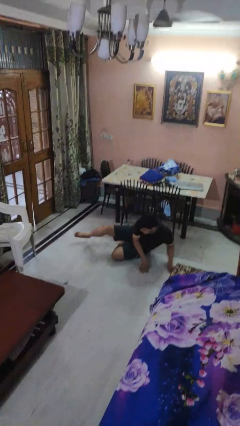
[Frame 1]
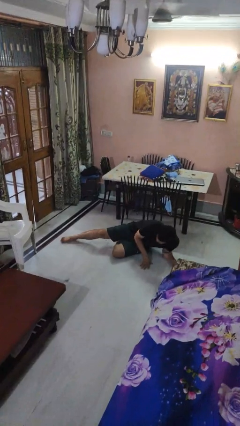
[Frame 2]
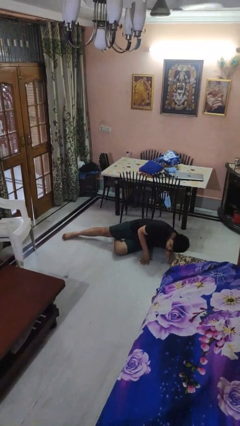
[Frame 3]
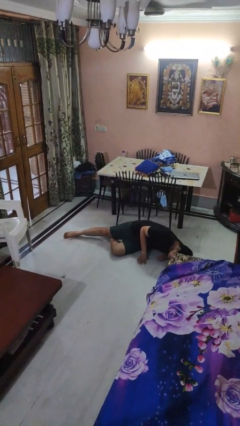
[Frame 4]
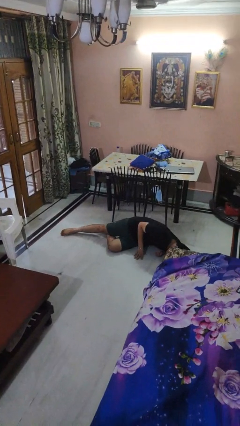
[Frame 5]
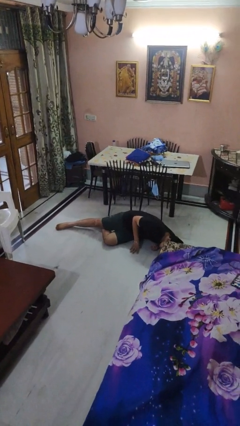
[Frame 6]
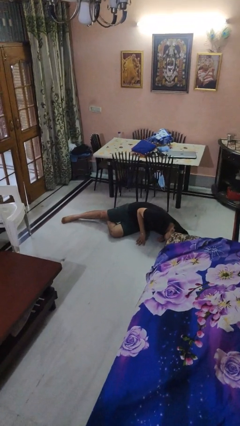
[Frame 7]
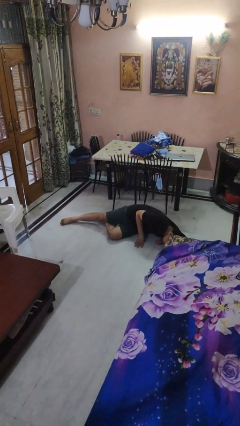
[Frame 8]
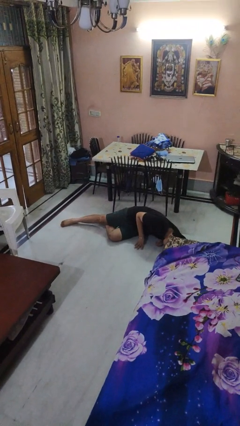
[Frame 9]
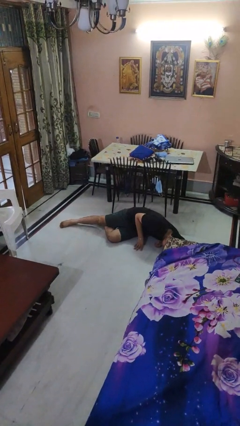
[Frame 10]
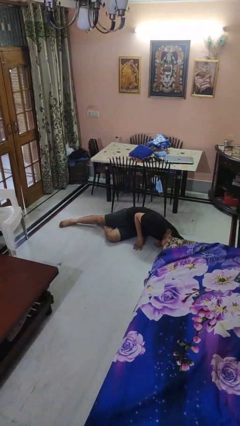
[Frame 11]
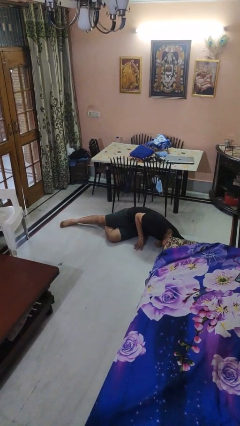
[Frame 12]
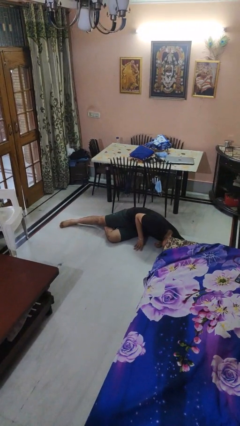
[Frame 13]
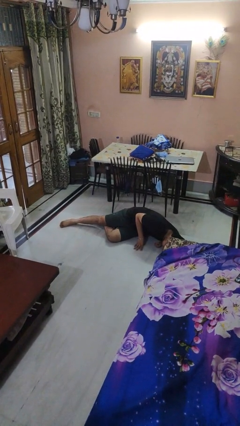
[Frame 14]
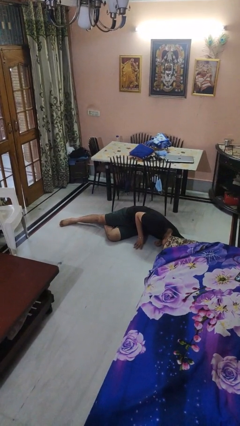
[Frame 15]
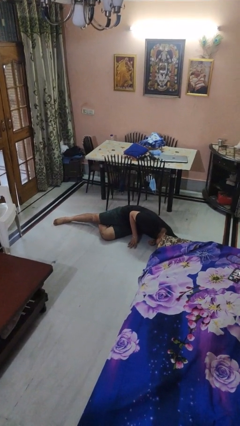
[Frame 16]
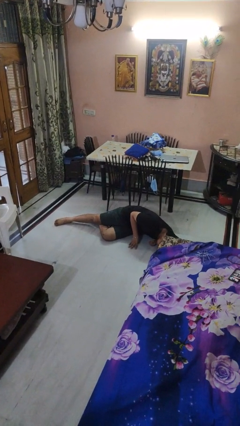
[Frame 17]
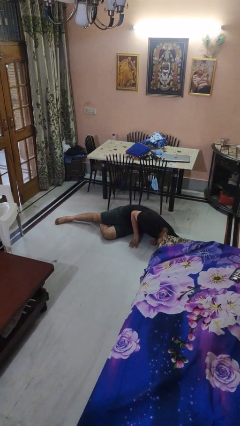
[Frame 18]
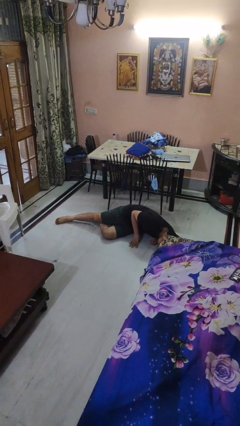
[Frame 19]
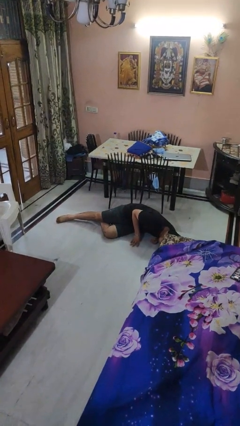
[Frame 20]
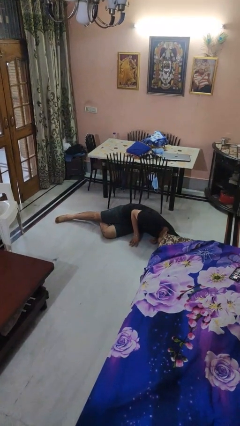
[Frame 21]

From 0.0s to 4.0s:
person lies down on floor

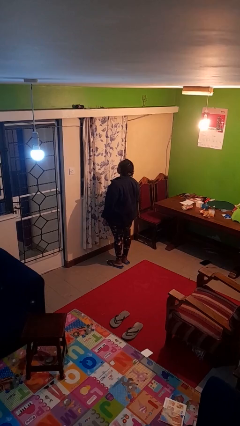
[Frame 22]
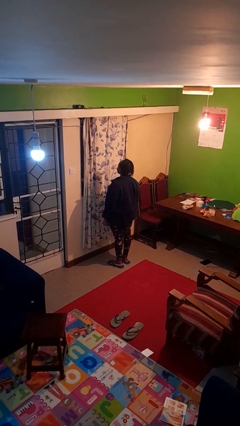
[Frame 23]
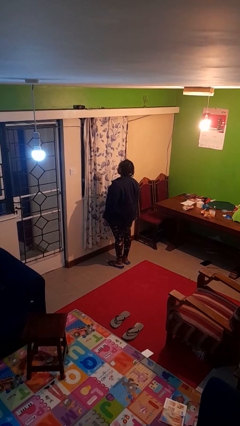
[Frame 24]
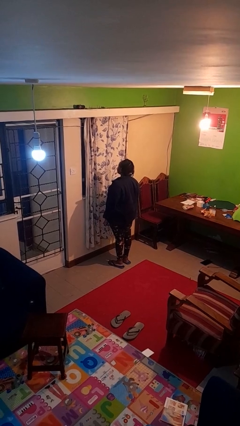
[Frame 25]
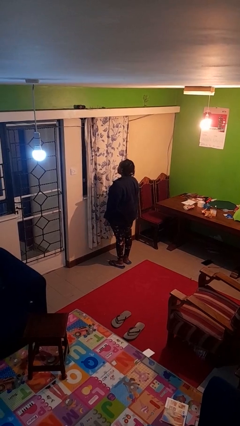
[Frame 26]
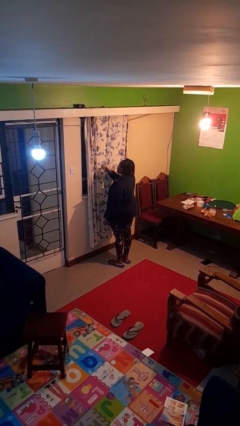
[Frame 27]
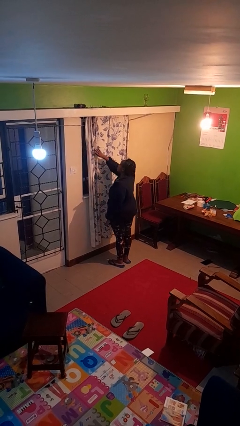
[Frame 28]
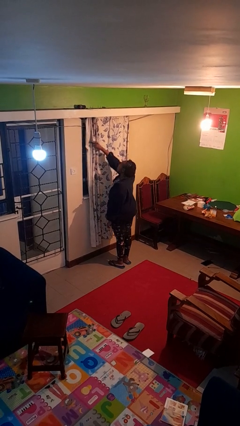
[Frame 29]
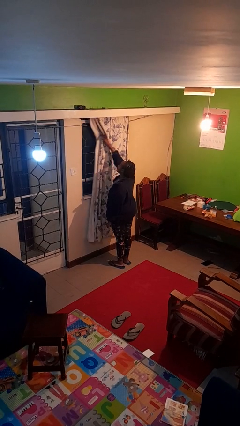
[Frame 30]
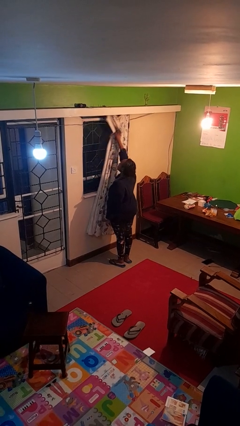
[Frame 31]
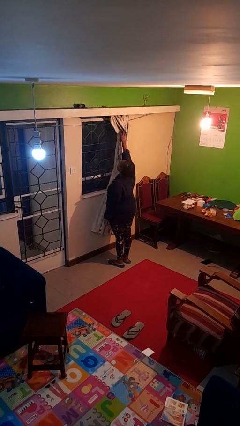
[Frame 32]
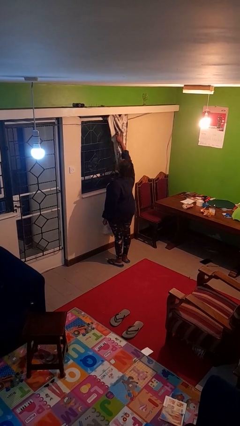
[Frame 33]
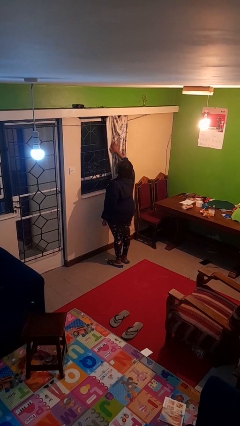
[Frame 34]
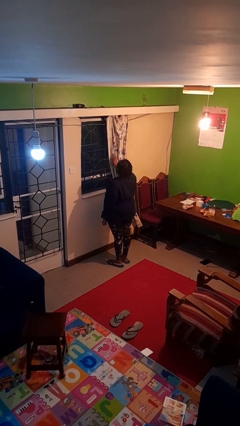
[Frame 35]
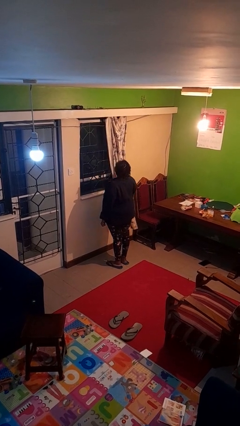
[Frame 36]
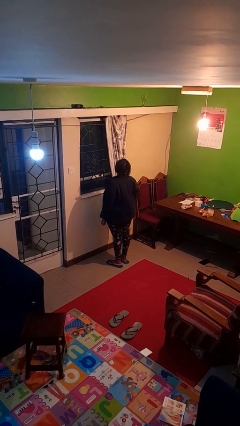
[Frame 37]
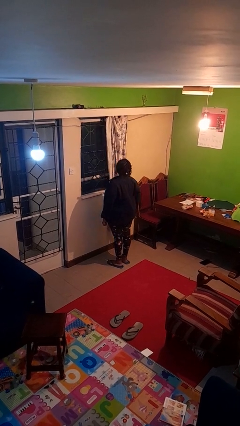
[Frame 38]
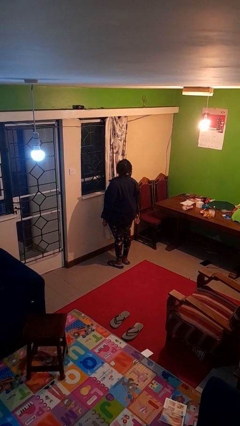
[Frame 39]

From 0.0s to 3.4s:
person opens curtains

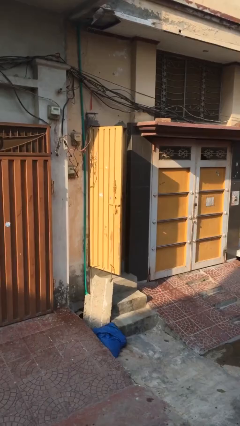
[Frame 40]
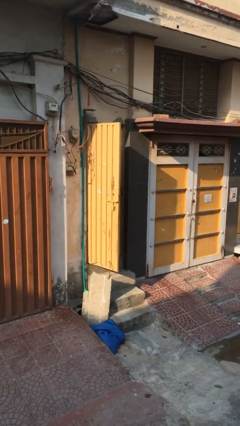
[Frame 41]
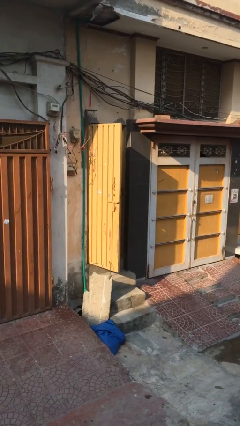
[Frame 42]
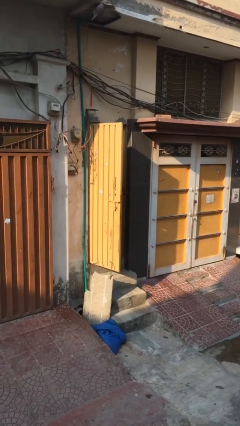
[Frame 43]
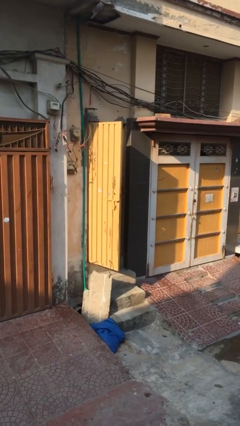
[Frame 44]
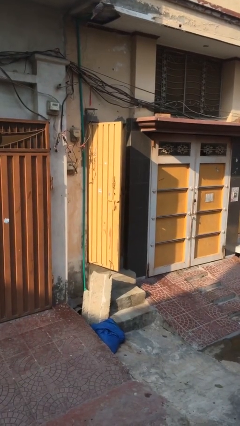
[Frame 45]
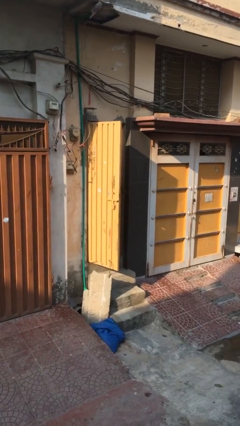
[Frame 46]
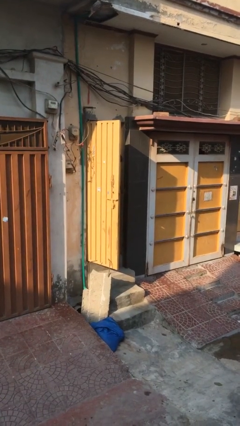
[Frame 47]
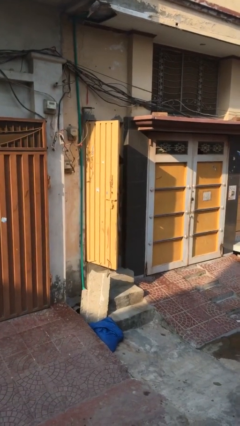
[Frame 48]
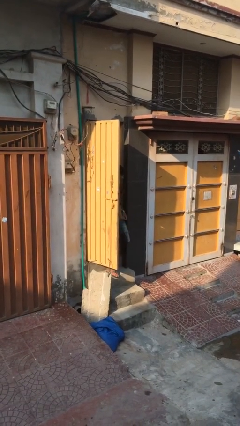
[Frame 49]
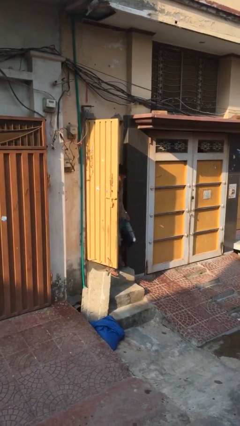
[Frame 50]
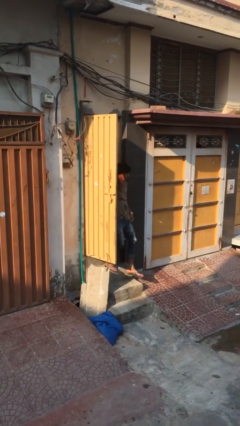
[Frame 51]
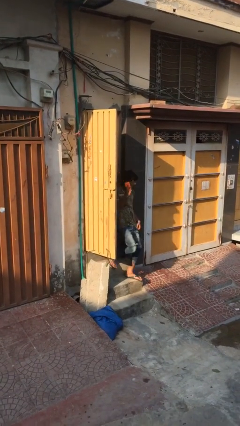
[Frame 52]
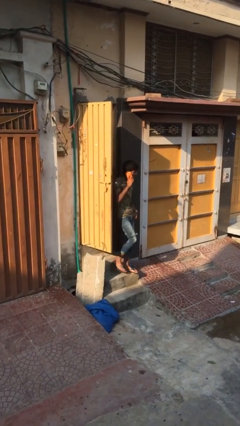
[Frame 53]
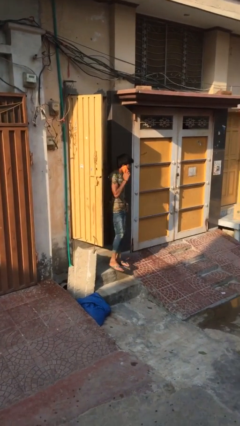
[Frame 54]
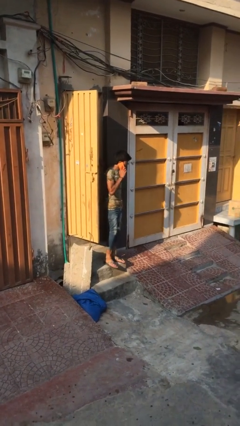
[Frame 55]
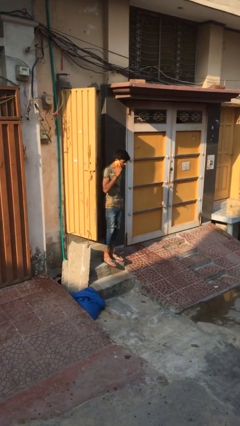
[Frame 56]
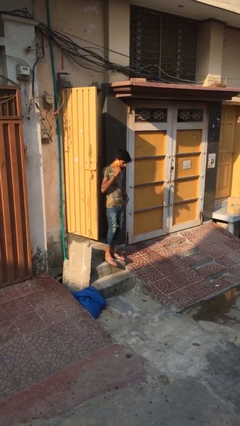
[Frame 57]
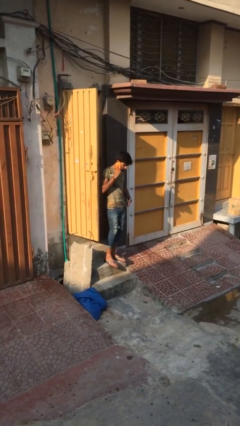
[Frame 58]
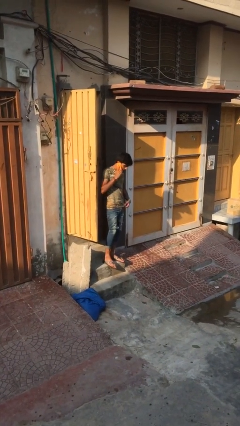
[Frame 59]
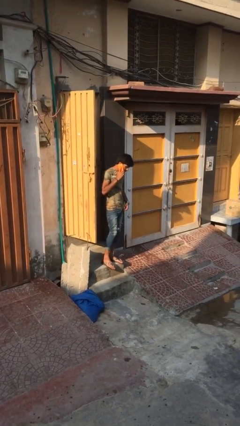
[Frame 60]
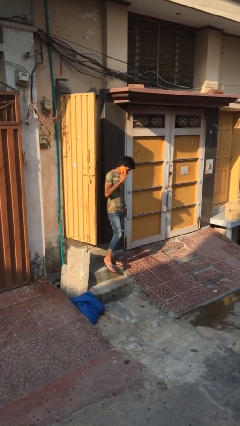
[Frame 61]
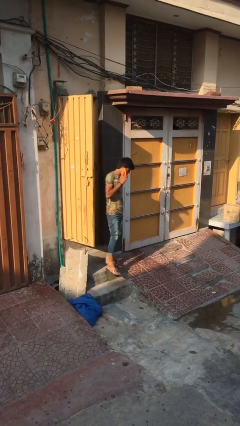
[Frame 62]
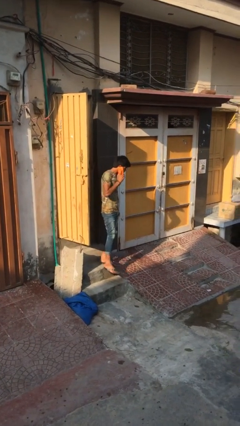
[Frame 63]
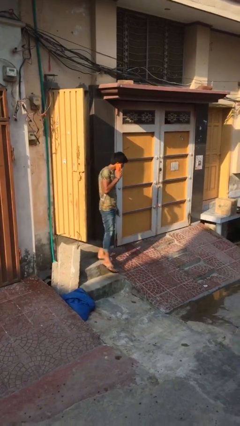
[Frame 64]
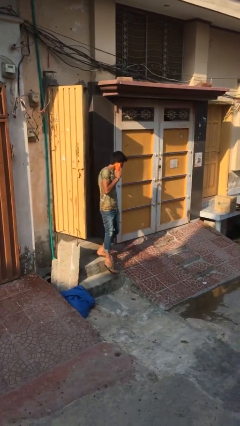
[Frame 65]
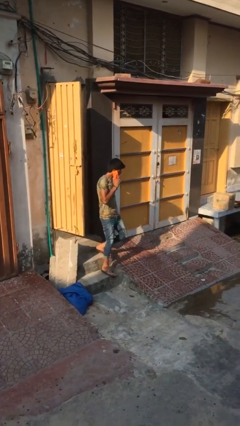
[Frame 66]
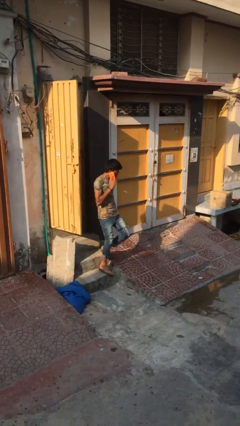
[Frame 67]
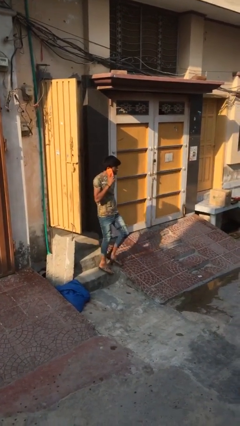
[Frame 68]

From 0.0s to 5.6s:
person enters scene through structure

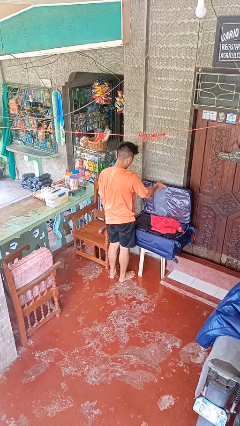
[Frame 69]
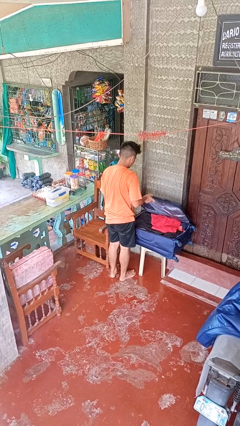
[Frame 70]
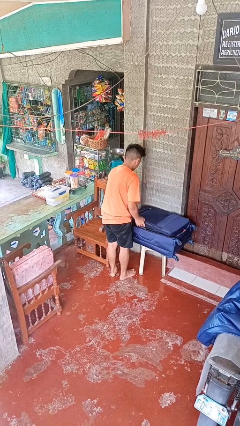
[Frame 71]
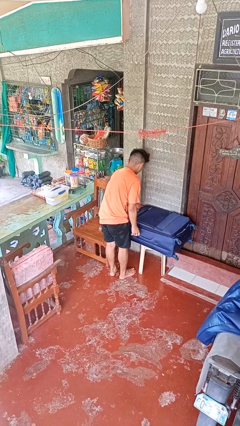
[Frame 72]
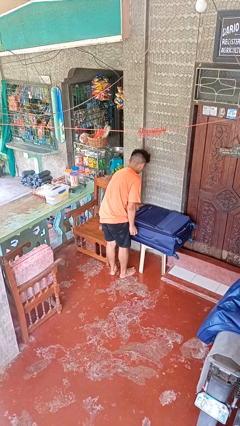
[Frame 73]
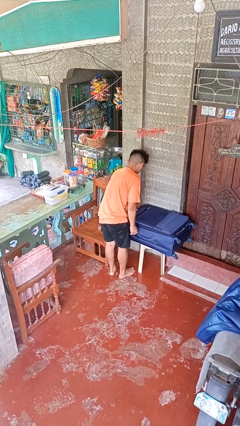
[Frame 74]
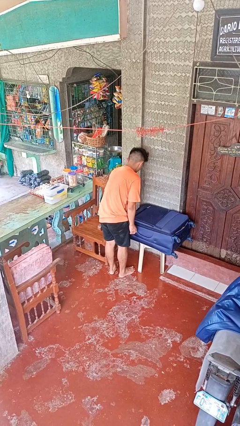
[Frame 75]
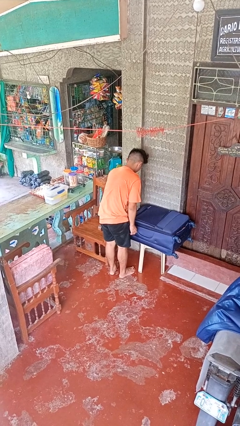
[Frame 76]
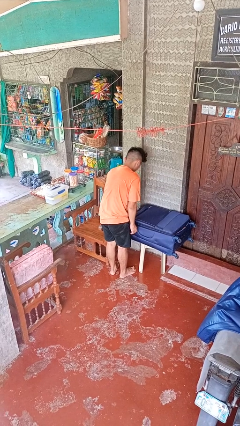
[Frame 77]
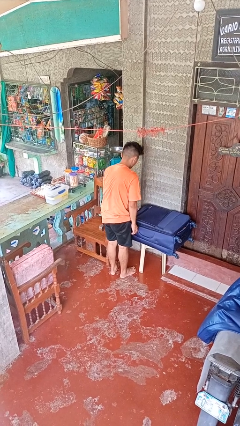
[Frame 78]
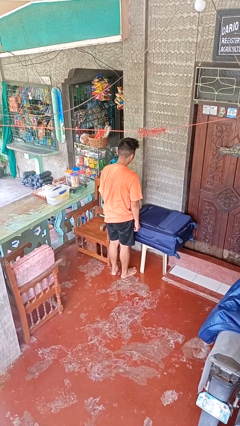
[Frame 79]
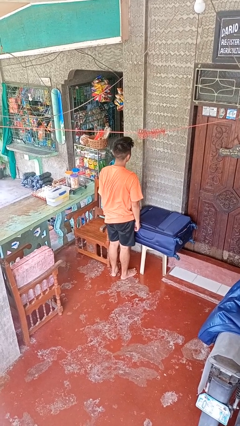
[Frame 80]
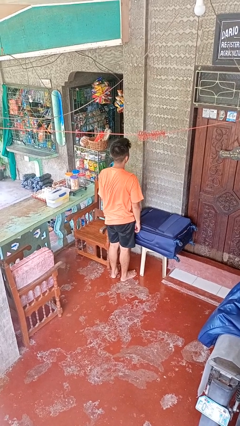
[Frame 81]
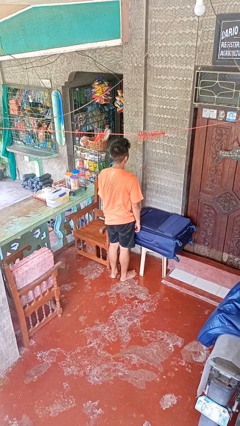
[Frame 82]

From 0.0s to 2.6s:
person closes suitcase

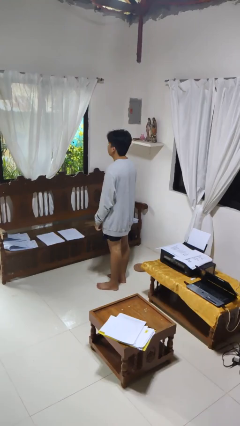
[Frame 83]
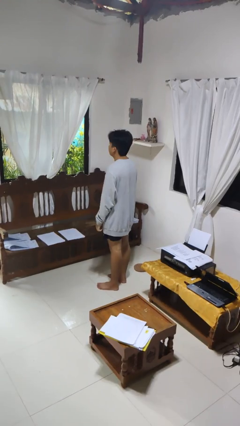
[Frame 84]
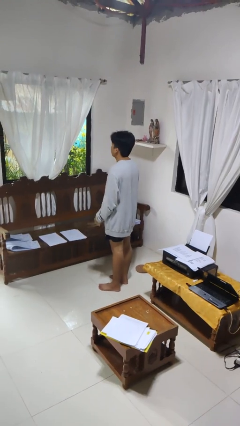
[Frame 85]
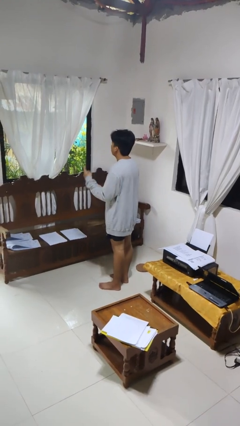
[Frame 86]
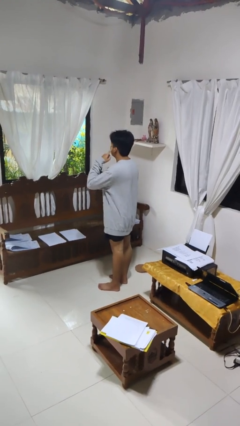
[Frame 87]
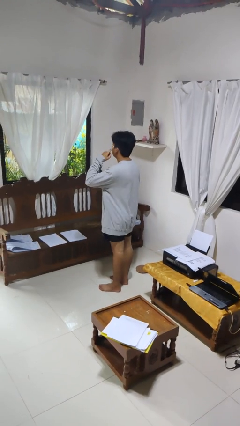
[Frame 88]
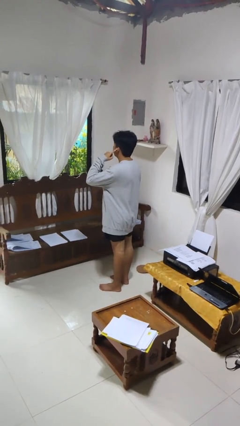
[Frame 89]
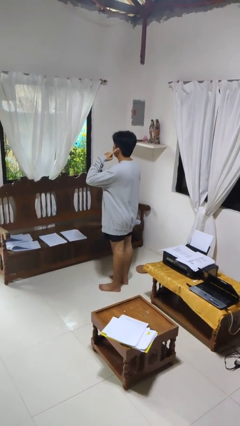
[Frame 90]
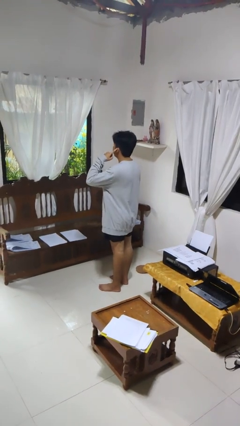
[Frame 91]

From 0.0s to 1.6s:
person gestures listen closely

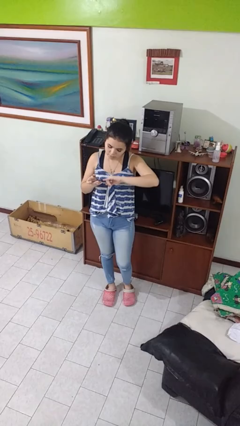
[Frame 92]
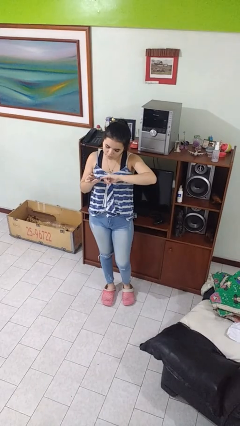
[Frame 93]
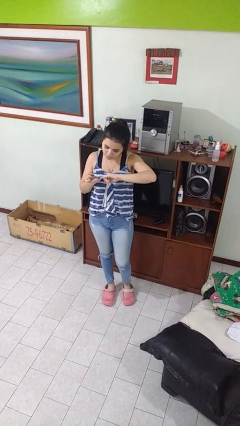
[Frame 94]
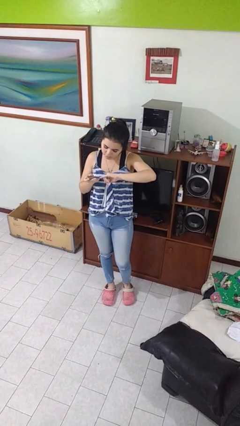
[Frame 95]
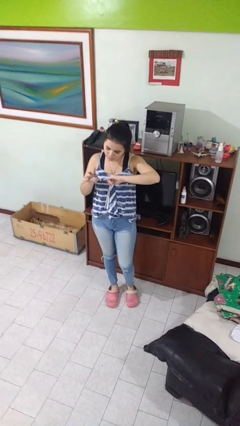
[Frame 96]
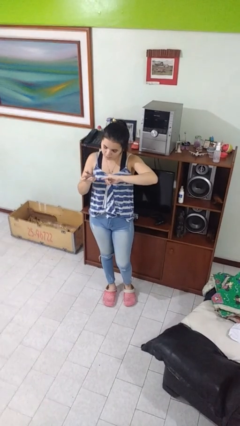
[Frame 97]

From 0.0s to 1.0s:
person clips fingernails
